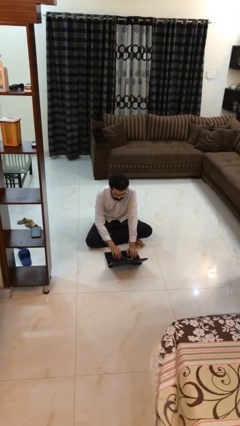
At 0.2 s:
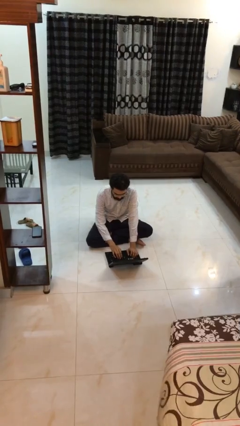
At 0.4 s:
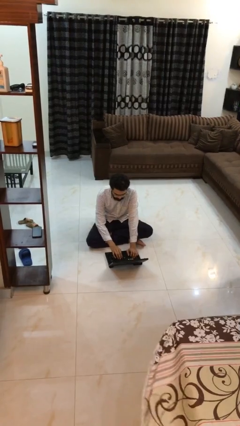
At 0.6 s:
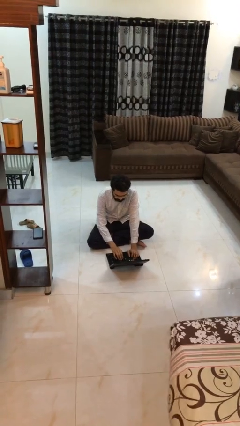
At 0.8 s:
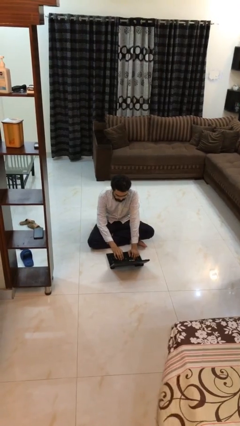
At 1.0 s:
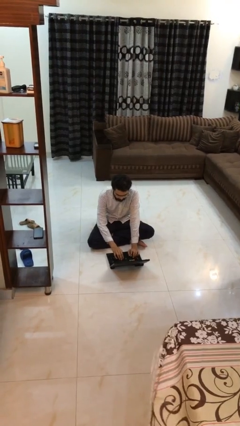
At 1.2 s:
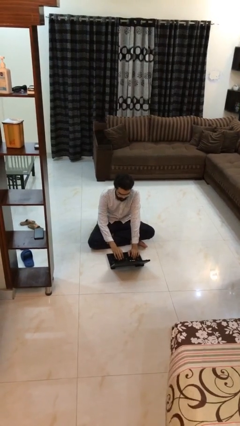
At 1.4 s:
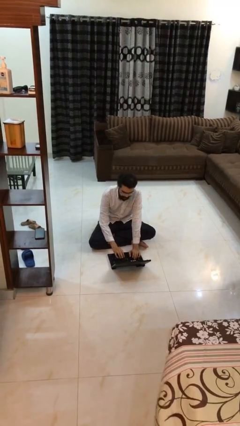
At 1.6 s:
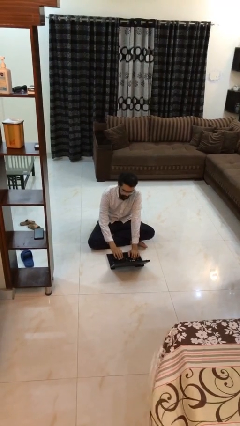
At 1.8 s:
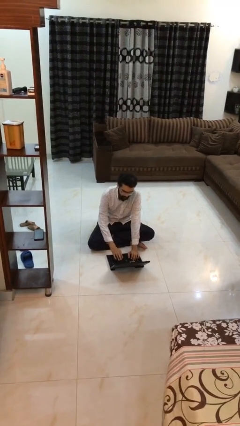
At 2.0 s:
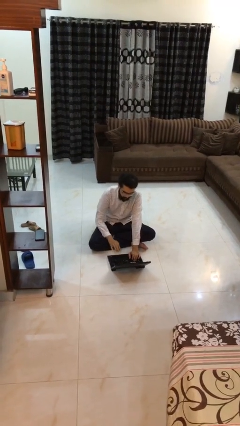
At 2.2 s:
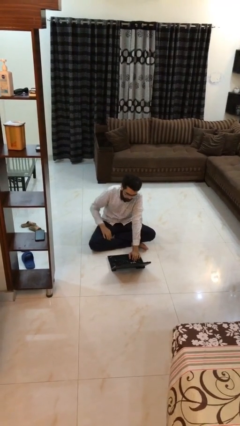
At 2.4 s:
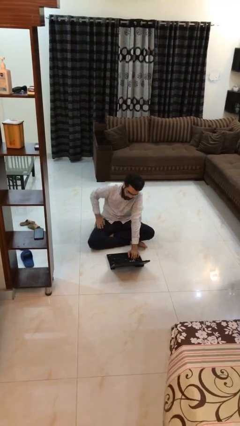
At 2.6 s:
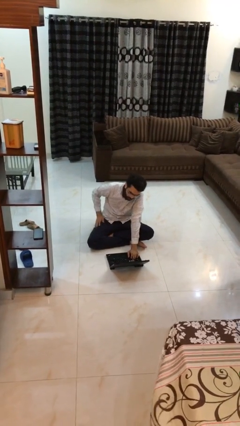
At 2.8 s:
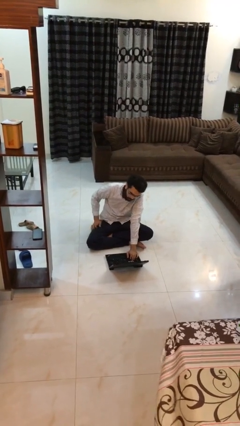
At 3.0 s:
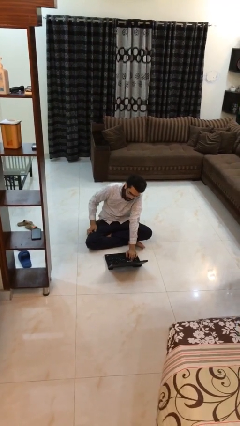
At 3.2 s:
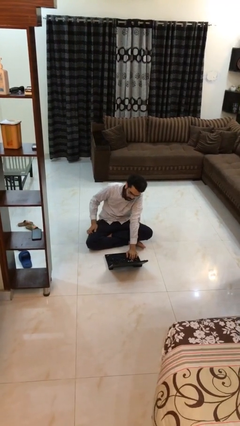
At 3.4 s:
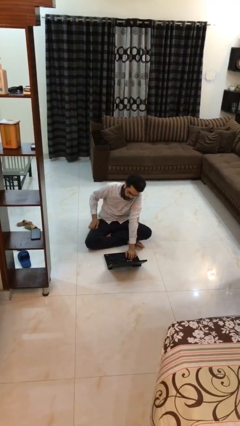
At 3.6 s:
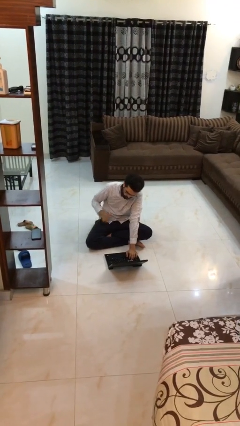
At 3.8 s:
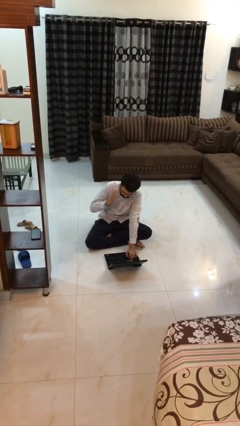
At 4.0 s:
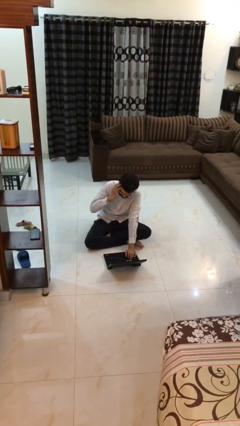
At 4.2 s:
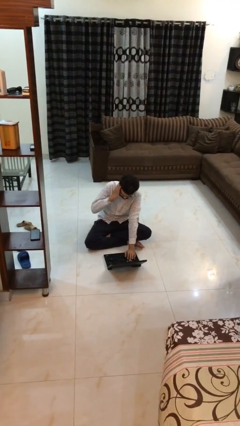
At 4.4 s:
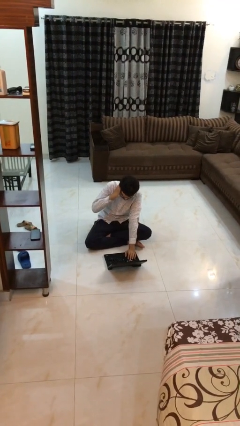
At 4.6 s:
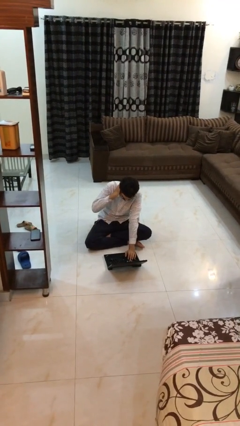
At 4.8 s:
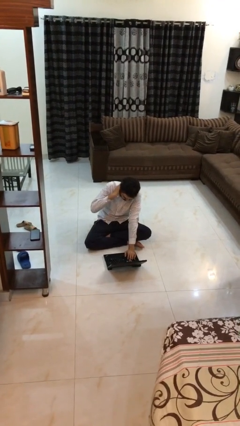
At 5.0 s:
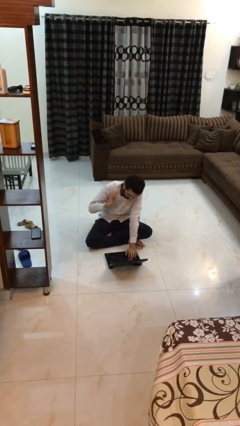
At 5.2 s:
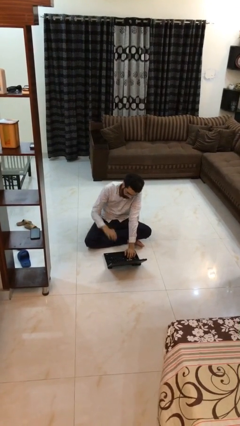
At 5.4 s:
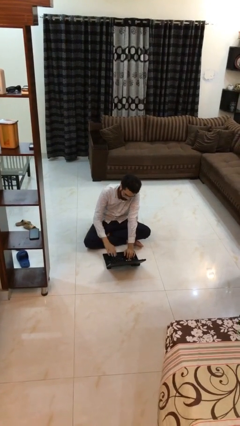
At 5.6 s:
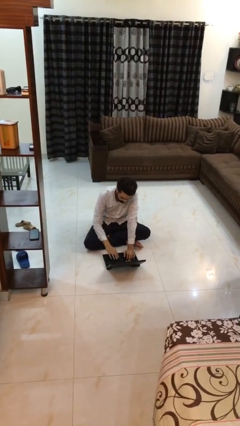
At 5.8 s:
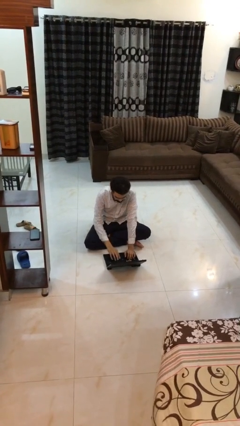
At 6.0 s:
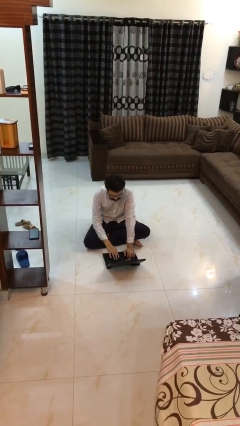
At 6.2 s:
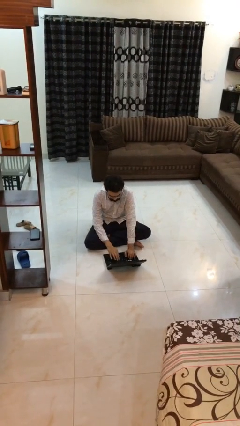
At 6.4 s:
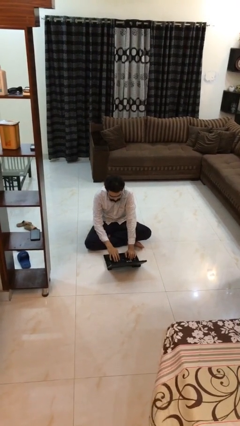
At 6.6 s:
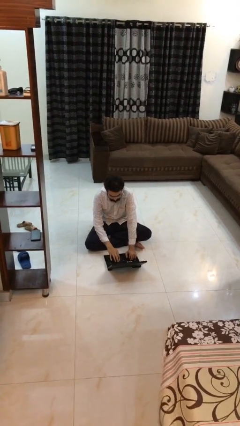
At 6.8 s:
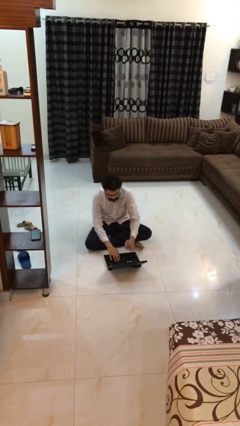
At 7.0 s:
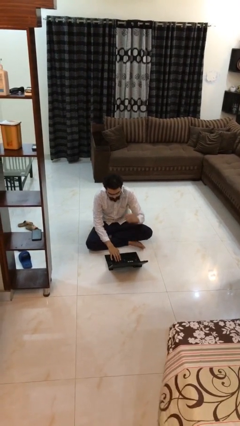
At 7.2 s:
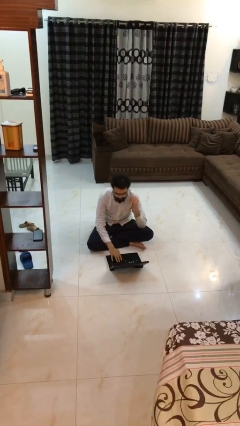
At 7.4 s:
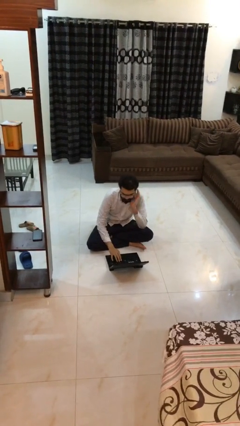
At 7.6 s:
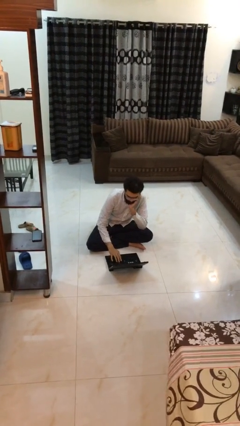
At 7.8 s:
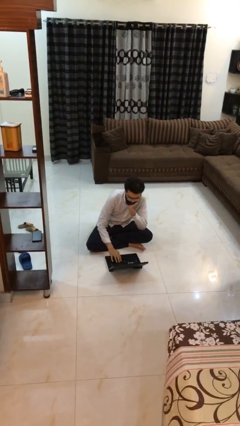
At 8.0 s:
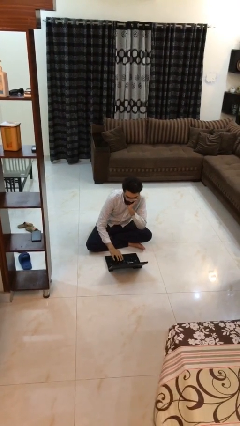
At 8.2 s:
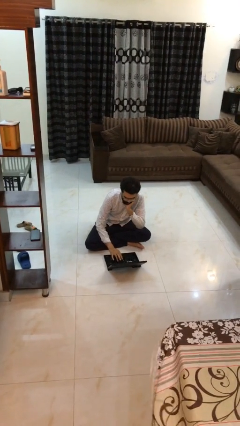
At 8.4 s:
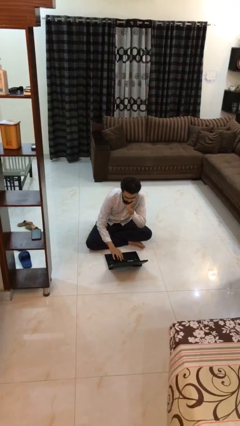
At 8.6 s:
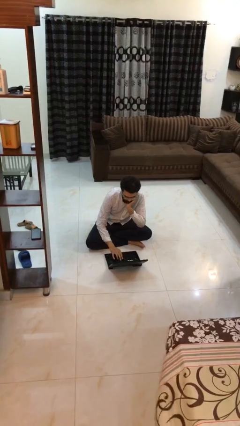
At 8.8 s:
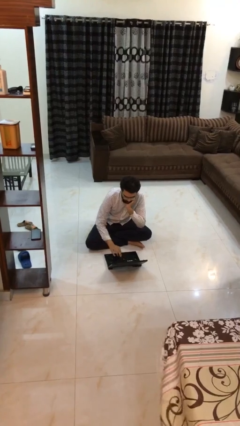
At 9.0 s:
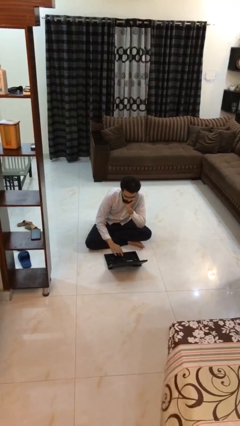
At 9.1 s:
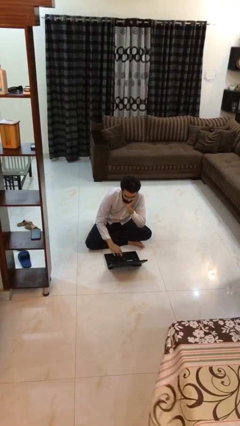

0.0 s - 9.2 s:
person interacts with laptop

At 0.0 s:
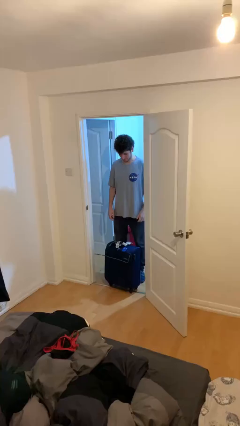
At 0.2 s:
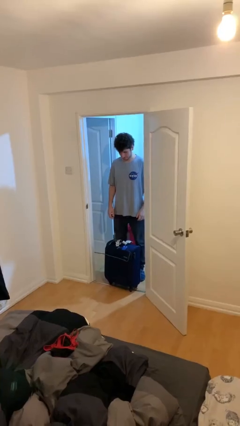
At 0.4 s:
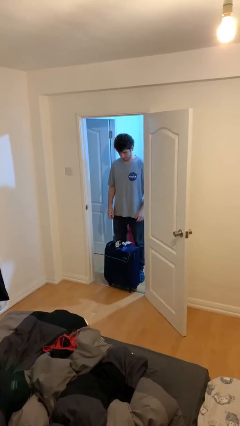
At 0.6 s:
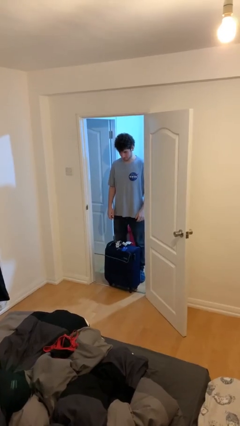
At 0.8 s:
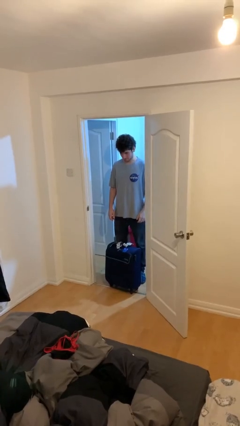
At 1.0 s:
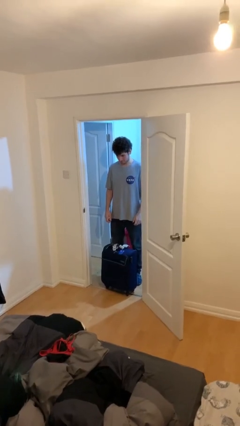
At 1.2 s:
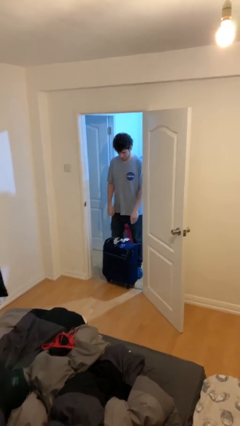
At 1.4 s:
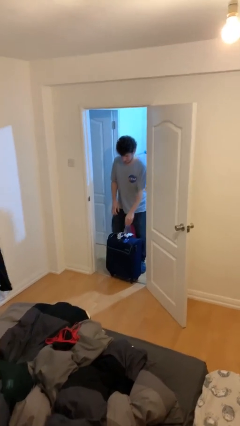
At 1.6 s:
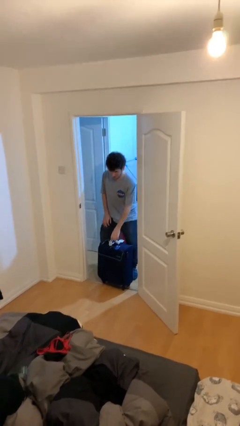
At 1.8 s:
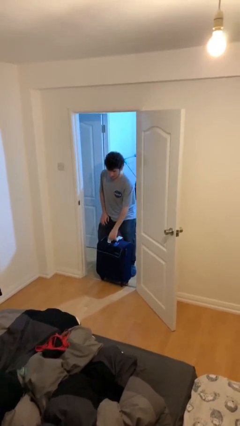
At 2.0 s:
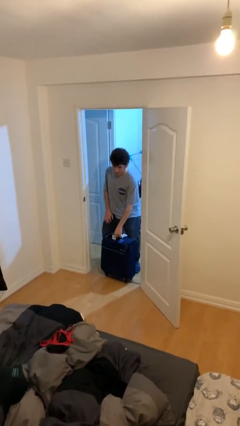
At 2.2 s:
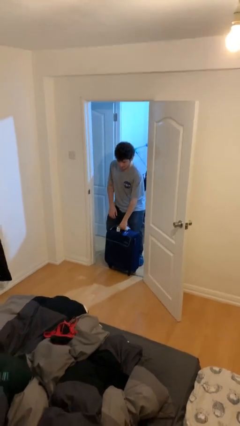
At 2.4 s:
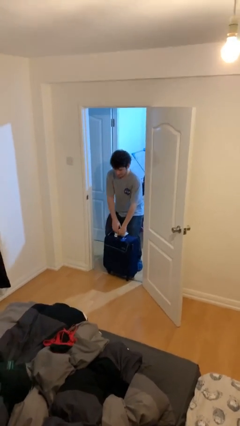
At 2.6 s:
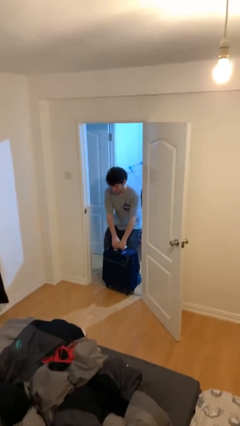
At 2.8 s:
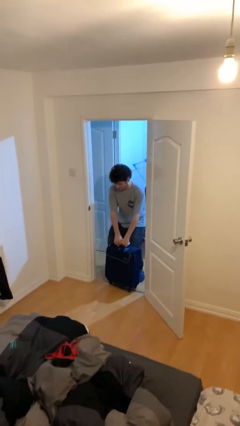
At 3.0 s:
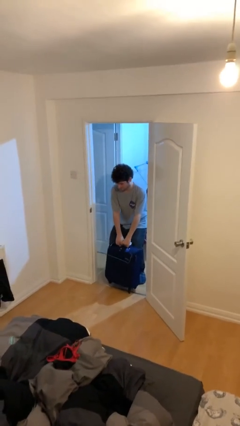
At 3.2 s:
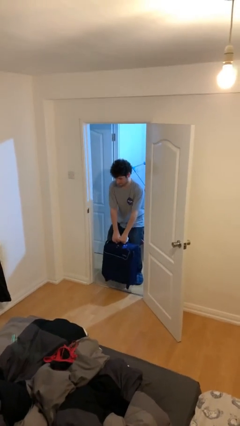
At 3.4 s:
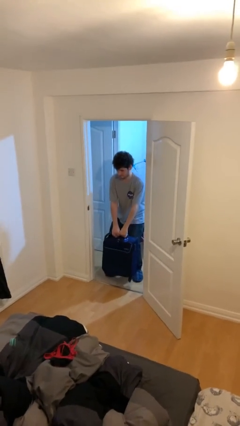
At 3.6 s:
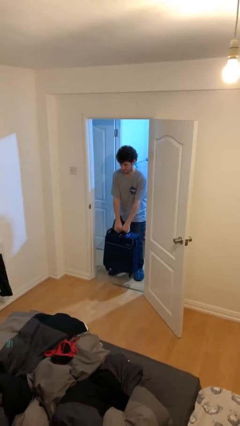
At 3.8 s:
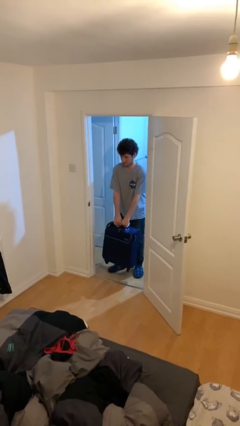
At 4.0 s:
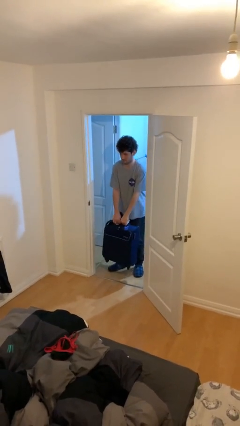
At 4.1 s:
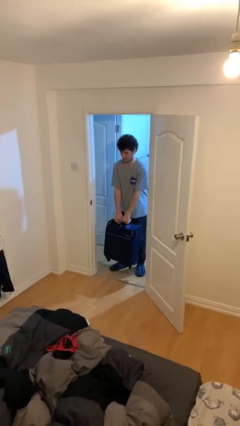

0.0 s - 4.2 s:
person picks up object from floor

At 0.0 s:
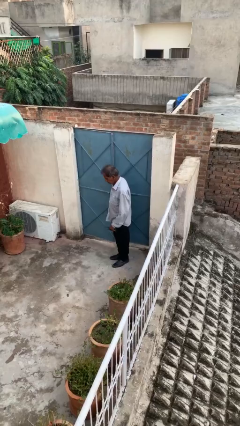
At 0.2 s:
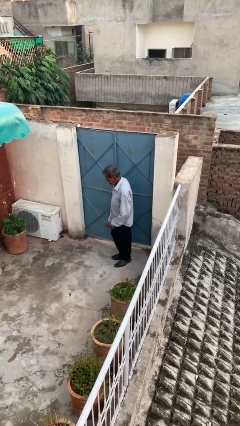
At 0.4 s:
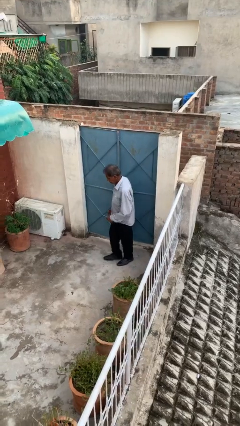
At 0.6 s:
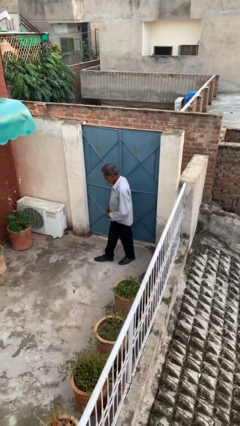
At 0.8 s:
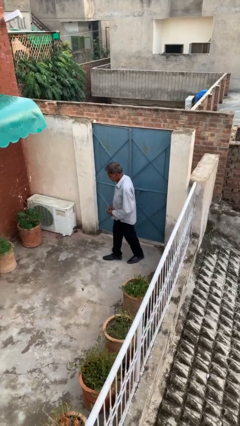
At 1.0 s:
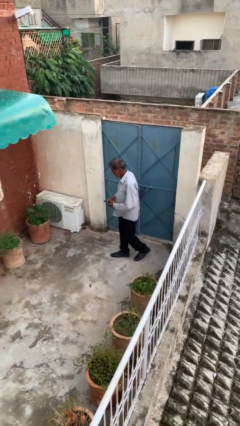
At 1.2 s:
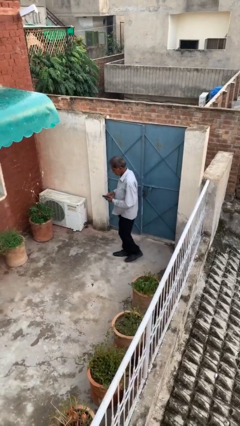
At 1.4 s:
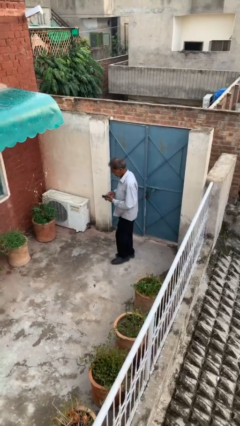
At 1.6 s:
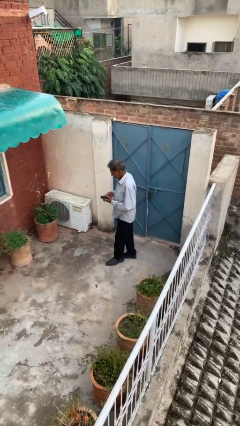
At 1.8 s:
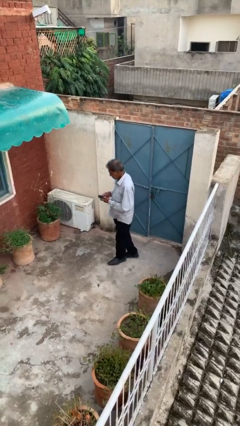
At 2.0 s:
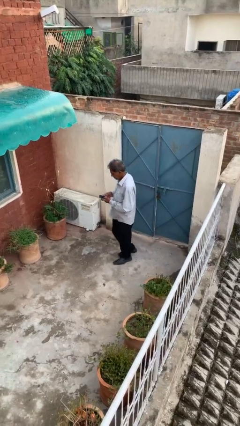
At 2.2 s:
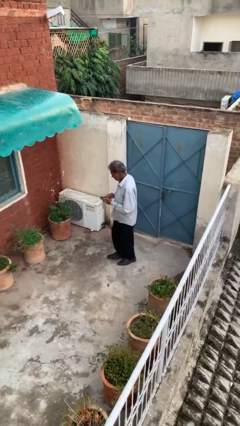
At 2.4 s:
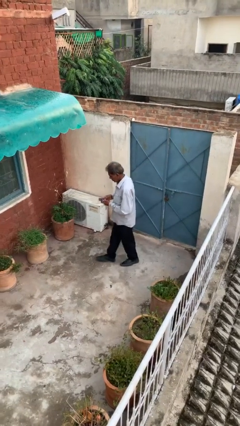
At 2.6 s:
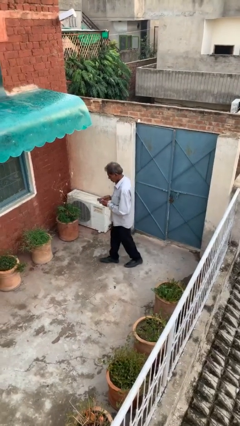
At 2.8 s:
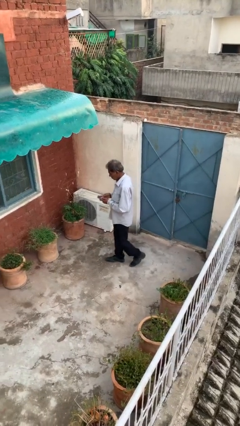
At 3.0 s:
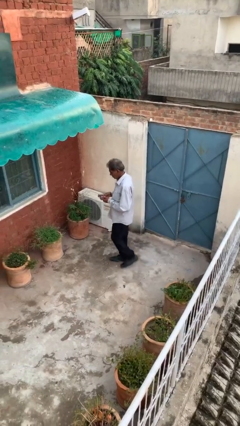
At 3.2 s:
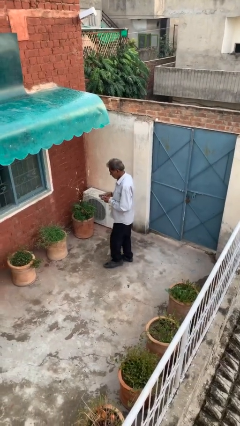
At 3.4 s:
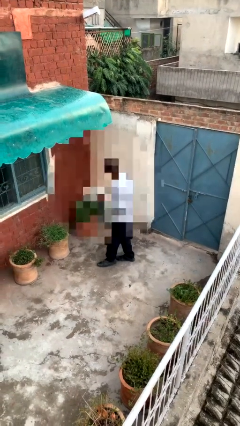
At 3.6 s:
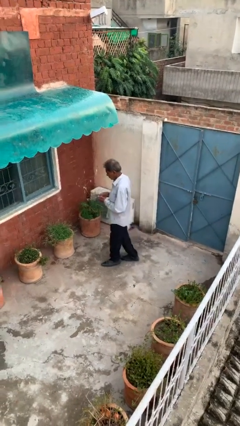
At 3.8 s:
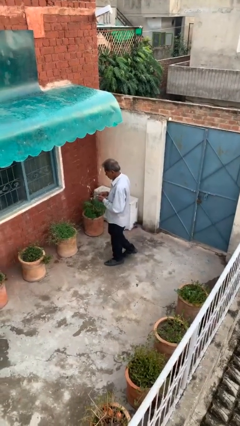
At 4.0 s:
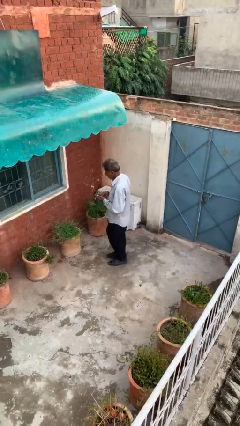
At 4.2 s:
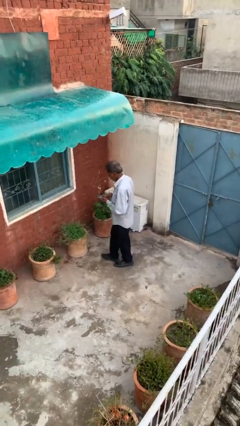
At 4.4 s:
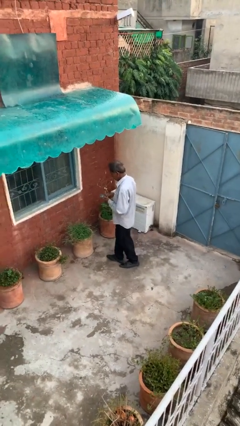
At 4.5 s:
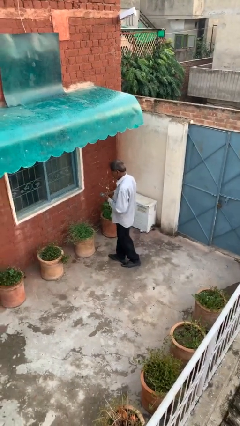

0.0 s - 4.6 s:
person texts on phone
